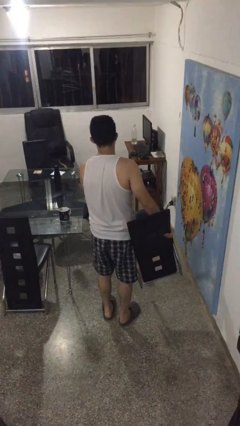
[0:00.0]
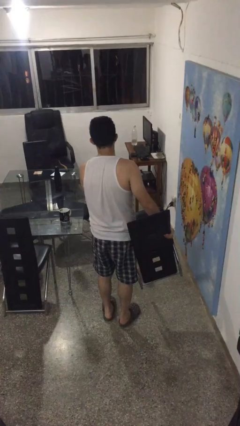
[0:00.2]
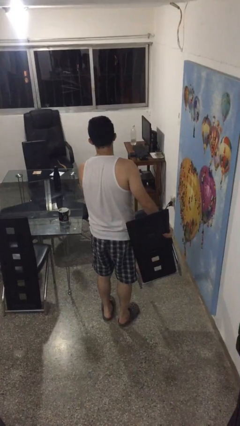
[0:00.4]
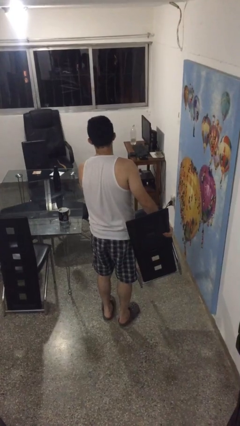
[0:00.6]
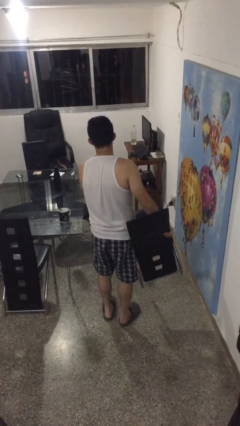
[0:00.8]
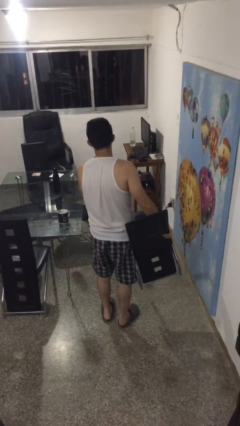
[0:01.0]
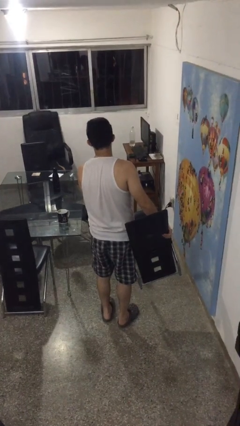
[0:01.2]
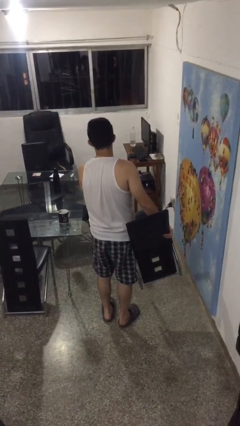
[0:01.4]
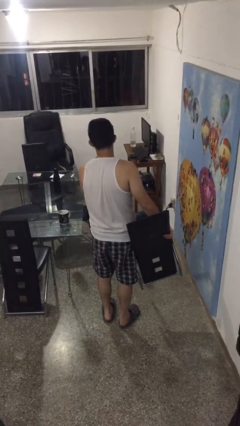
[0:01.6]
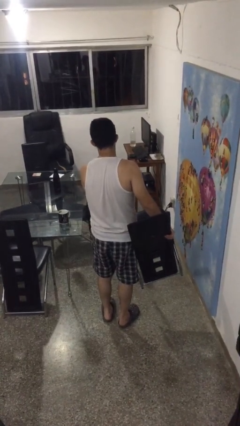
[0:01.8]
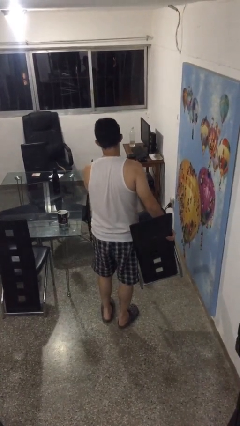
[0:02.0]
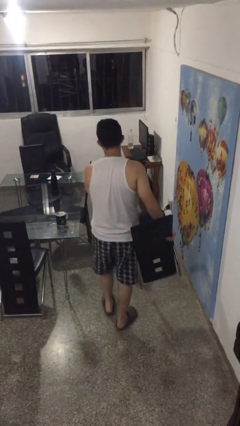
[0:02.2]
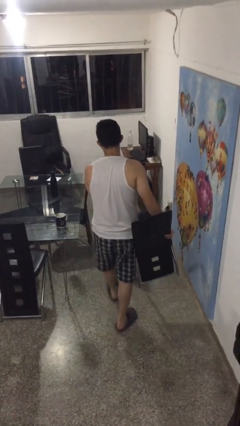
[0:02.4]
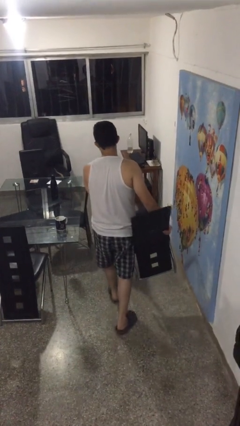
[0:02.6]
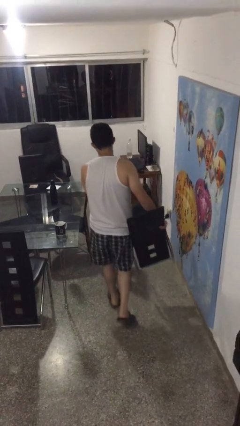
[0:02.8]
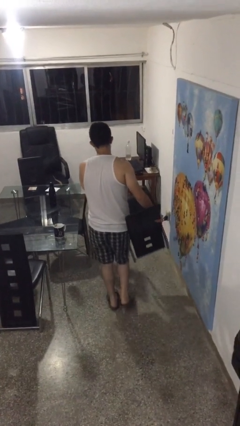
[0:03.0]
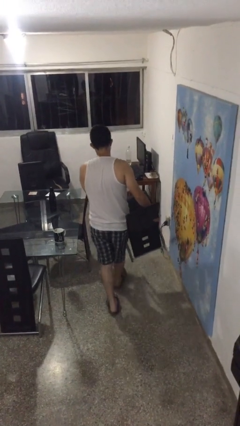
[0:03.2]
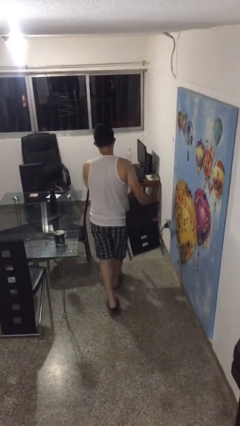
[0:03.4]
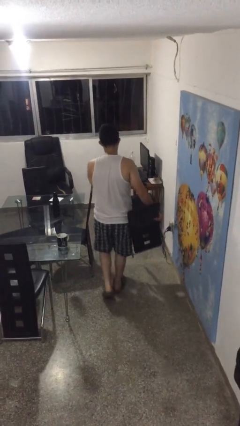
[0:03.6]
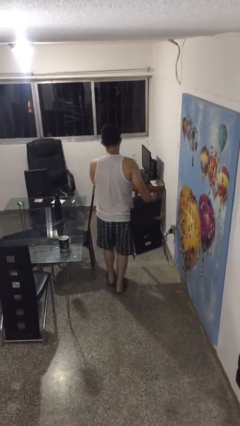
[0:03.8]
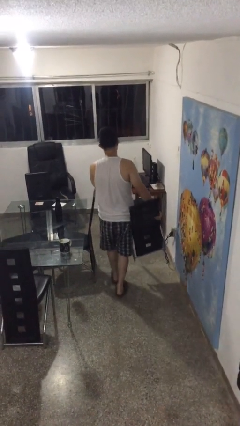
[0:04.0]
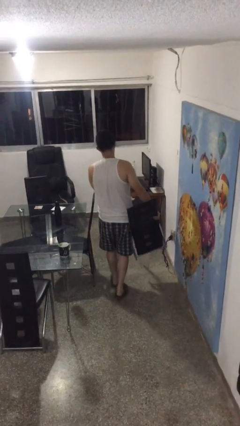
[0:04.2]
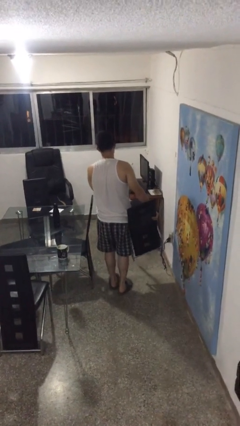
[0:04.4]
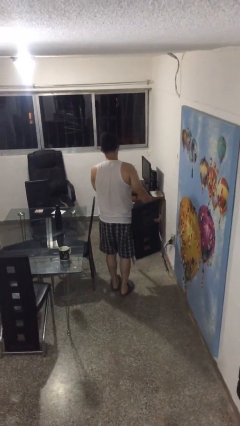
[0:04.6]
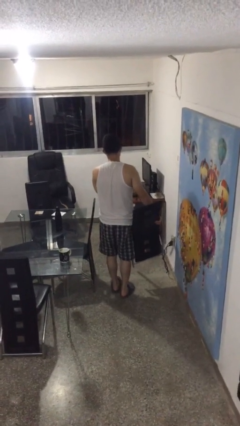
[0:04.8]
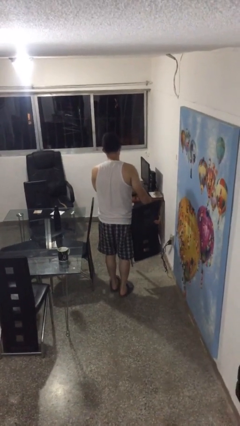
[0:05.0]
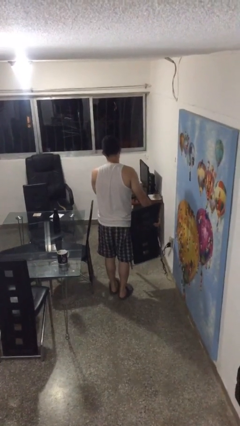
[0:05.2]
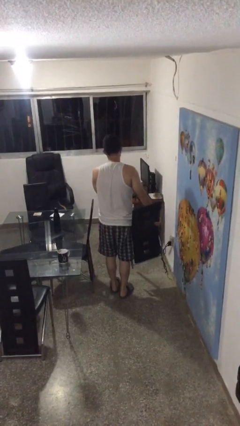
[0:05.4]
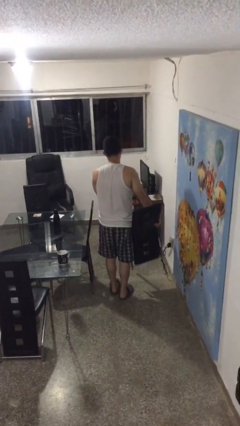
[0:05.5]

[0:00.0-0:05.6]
person carries furniture

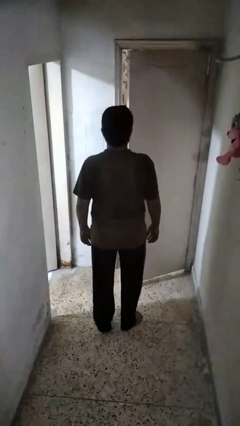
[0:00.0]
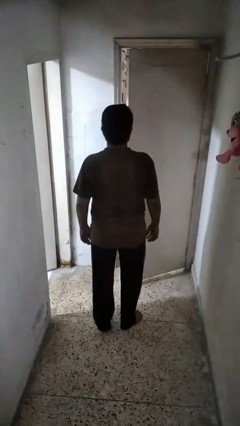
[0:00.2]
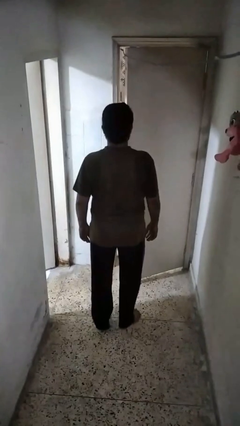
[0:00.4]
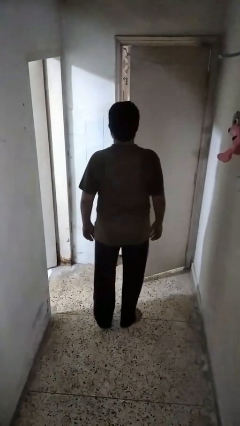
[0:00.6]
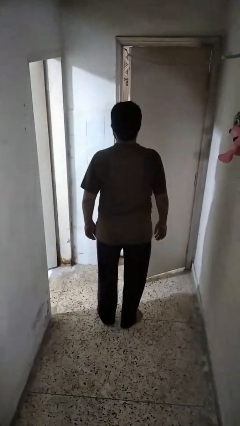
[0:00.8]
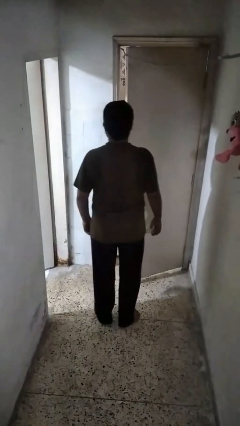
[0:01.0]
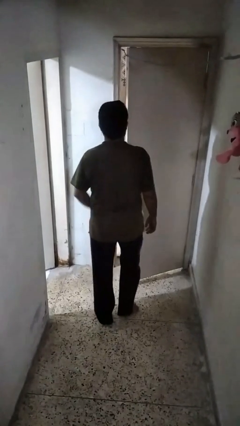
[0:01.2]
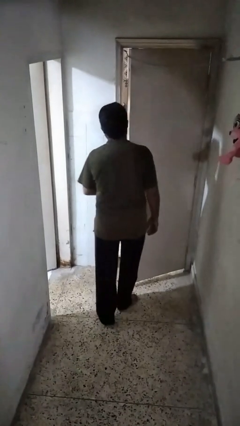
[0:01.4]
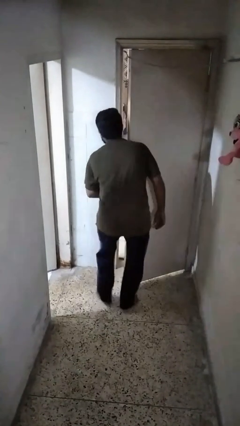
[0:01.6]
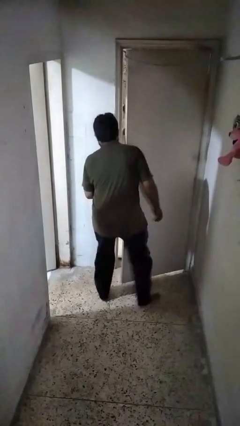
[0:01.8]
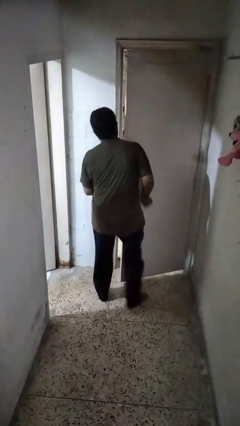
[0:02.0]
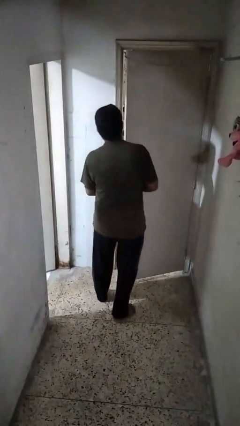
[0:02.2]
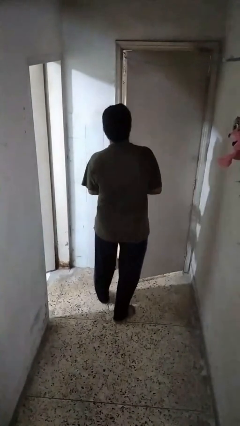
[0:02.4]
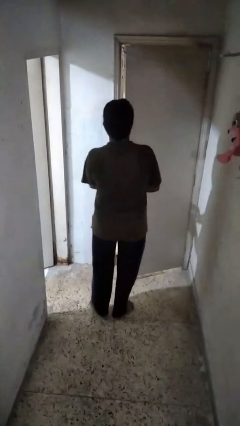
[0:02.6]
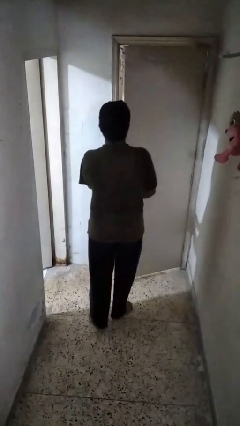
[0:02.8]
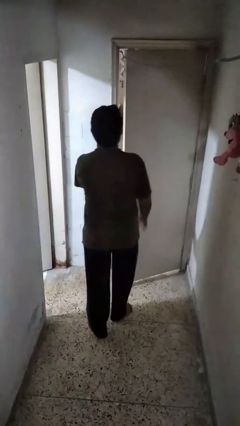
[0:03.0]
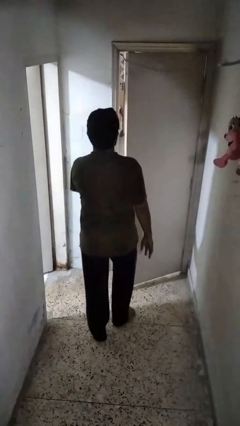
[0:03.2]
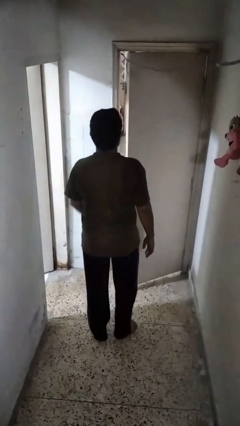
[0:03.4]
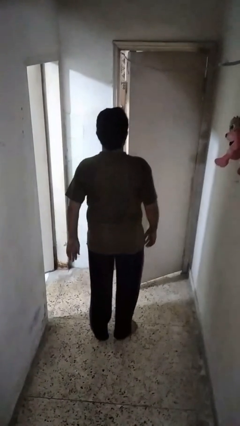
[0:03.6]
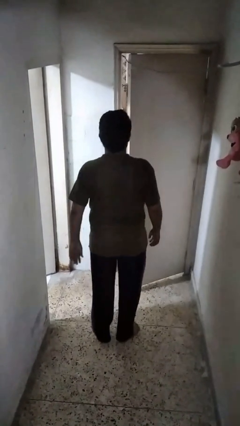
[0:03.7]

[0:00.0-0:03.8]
person bumps into wall

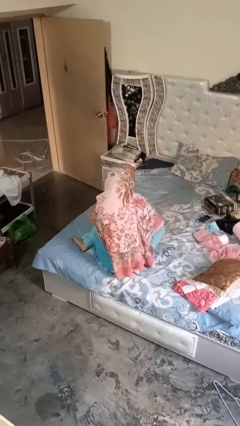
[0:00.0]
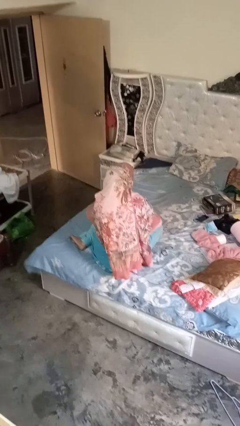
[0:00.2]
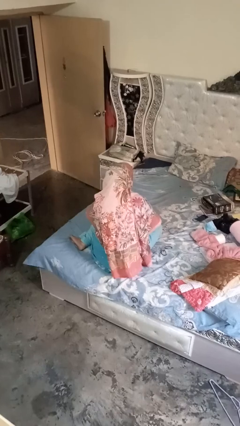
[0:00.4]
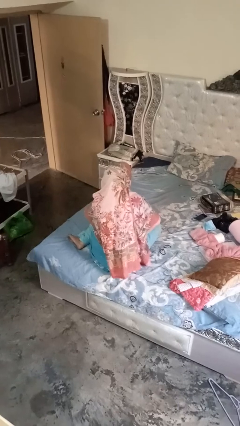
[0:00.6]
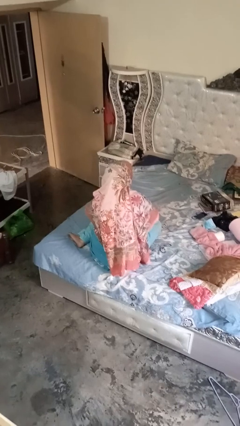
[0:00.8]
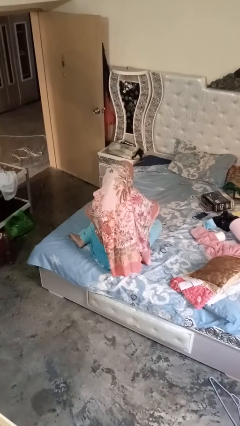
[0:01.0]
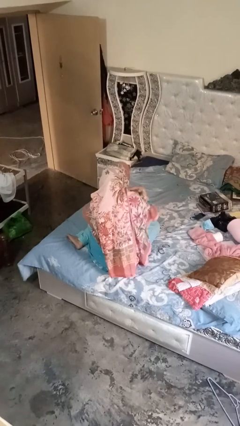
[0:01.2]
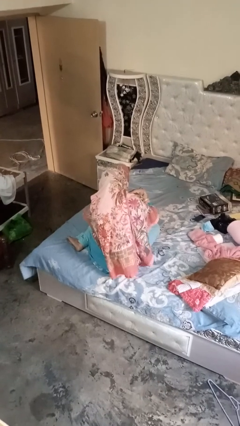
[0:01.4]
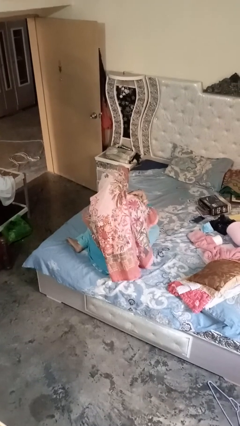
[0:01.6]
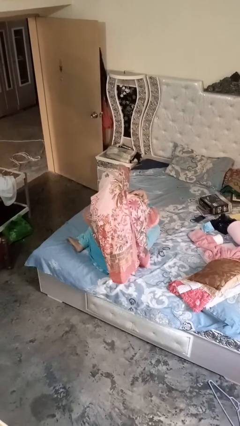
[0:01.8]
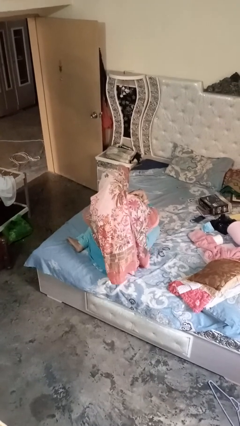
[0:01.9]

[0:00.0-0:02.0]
person gestures cut

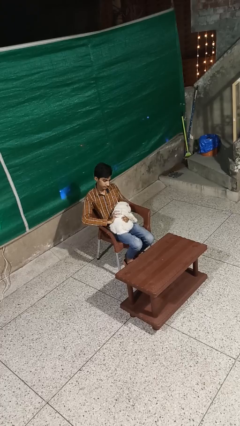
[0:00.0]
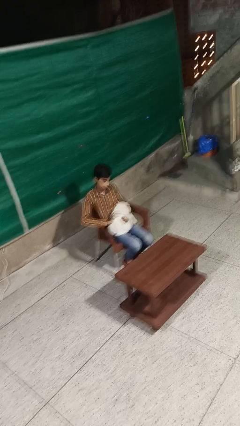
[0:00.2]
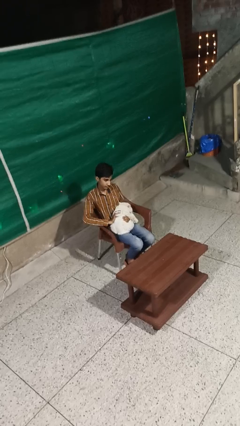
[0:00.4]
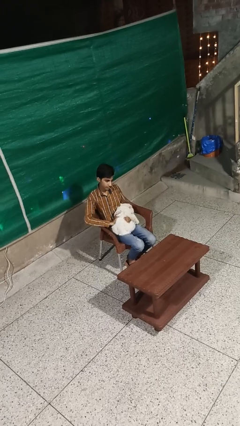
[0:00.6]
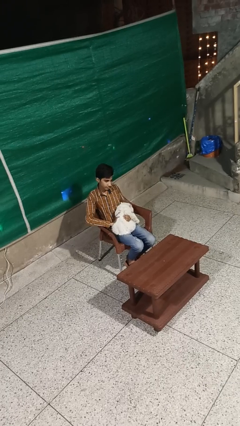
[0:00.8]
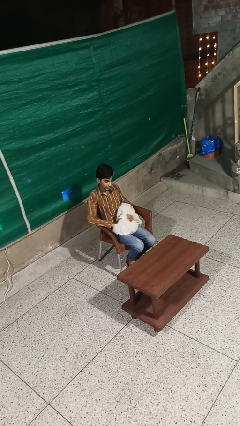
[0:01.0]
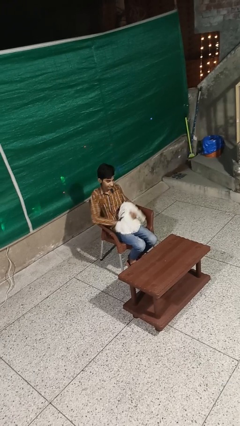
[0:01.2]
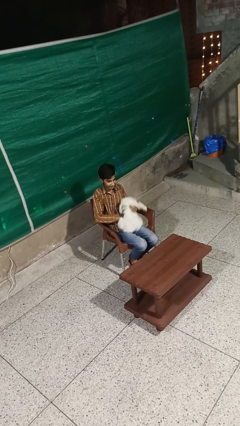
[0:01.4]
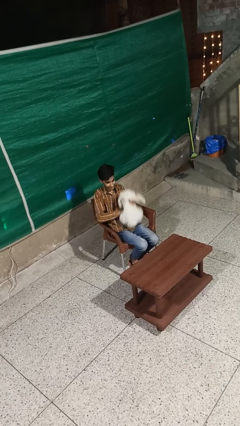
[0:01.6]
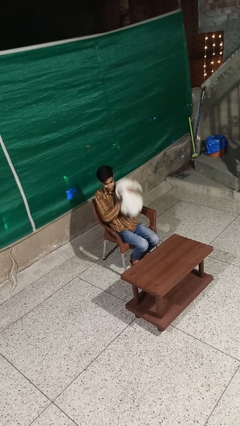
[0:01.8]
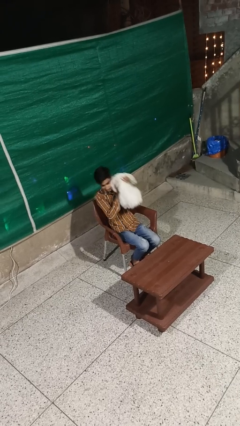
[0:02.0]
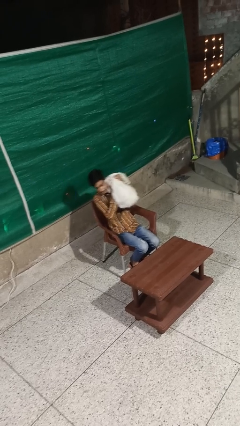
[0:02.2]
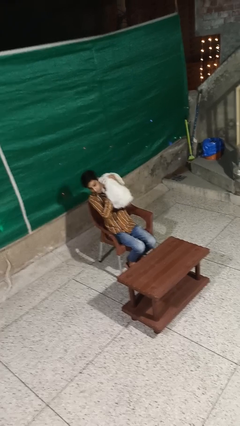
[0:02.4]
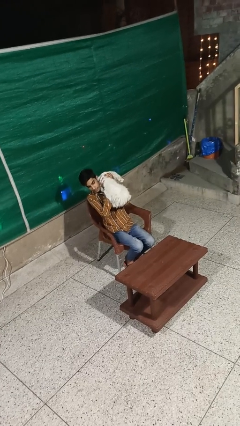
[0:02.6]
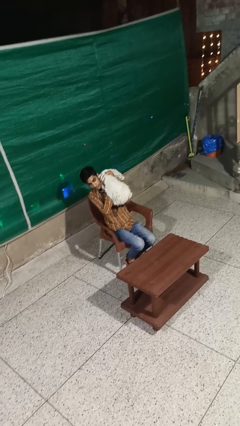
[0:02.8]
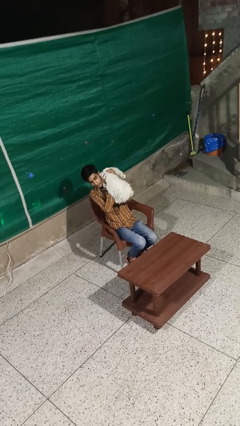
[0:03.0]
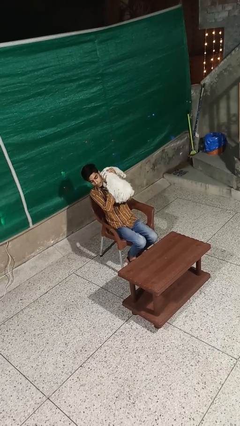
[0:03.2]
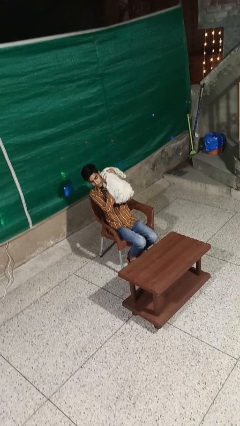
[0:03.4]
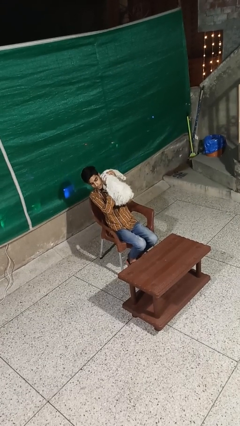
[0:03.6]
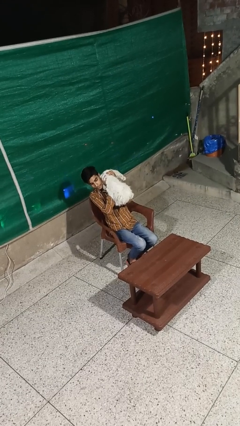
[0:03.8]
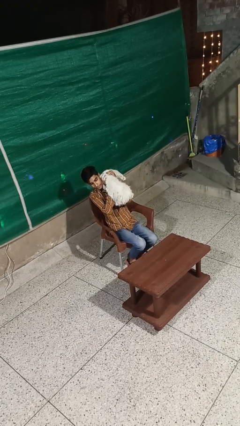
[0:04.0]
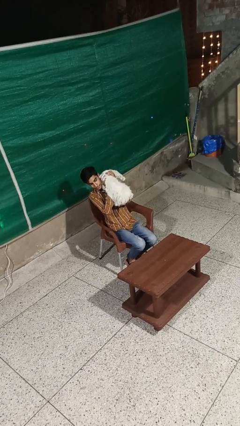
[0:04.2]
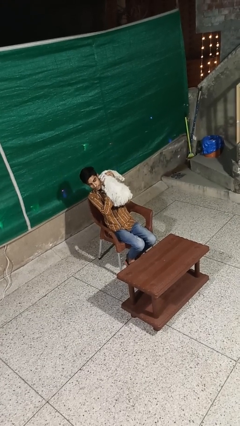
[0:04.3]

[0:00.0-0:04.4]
person hugs cat

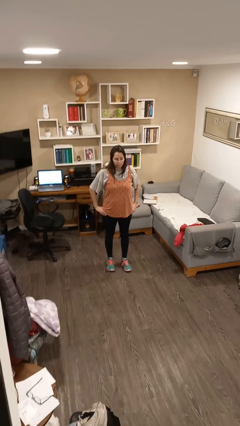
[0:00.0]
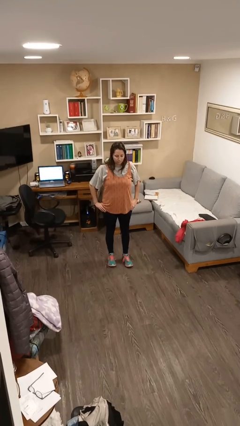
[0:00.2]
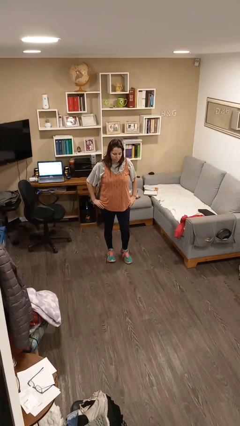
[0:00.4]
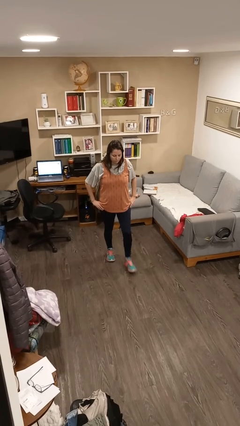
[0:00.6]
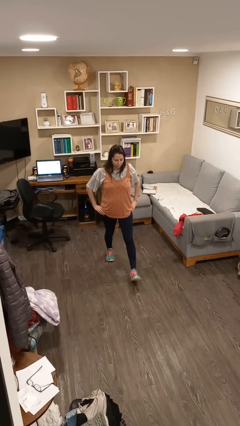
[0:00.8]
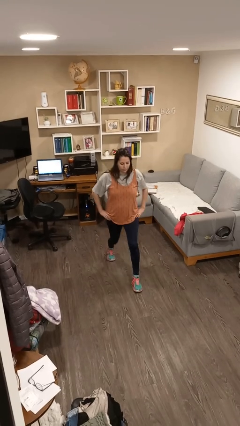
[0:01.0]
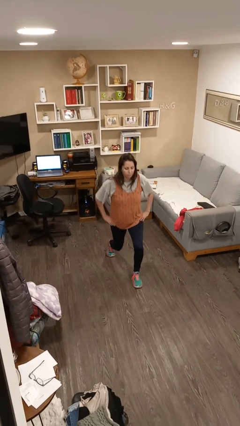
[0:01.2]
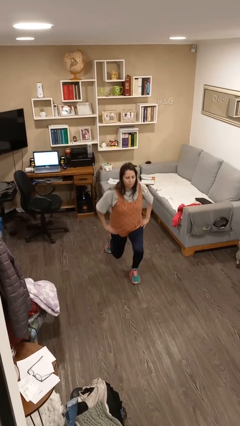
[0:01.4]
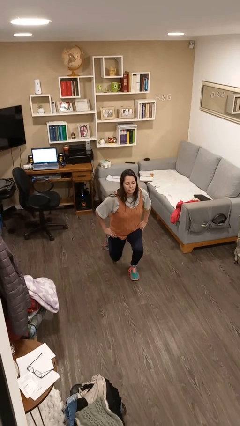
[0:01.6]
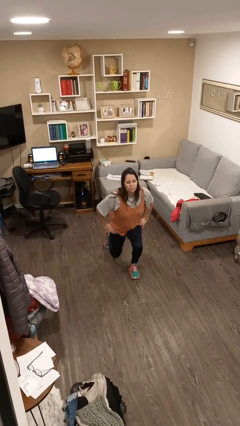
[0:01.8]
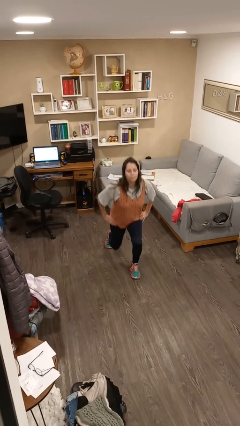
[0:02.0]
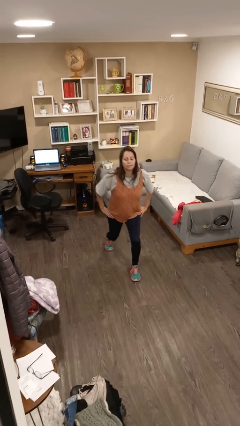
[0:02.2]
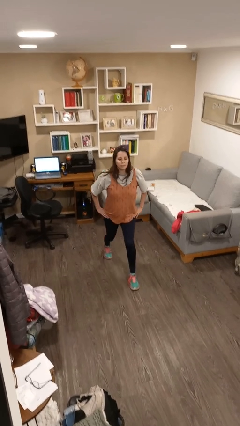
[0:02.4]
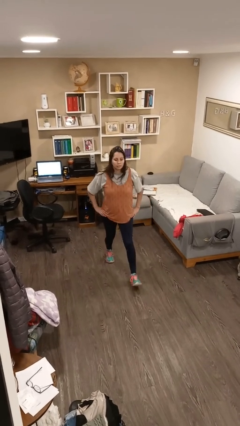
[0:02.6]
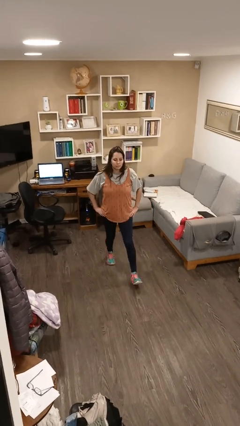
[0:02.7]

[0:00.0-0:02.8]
person exercises with lunges
